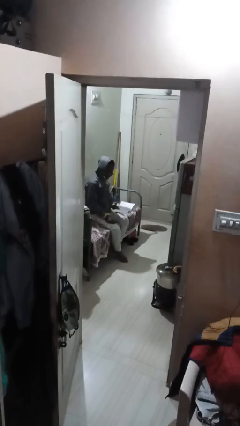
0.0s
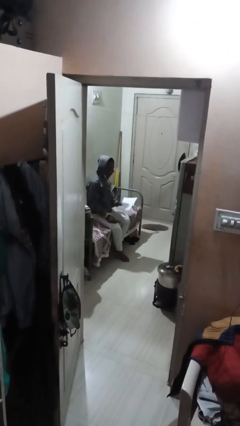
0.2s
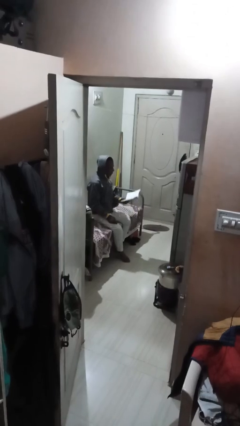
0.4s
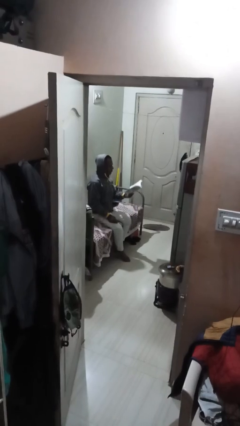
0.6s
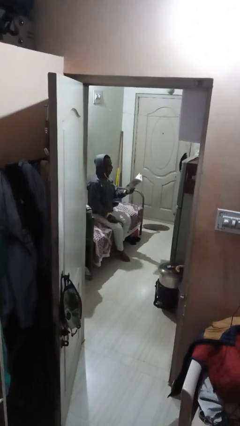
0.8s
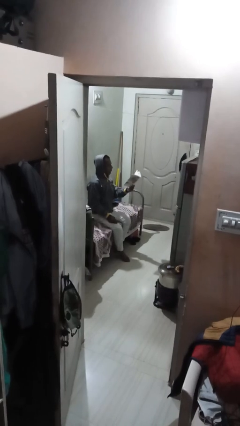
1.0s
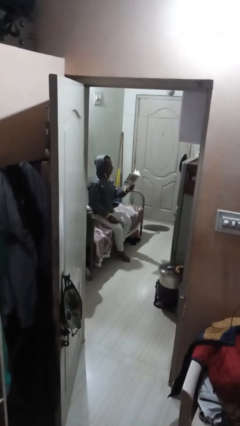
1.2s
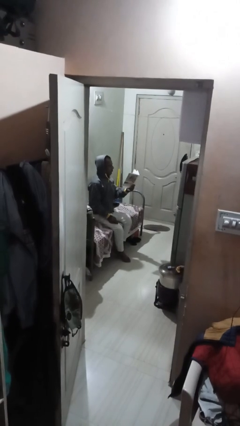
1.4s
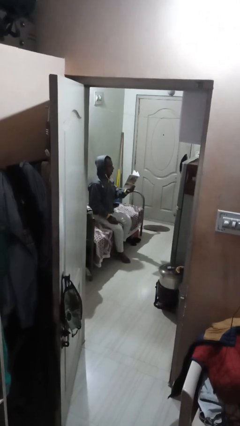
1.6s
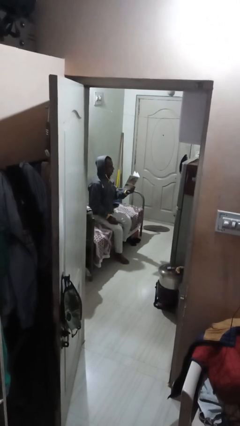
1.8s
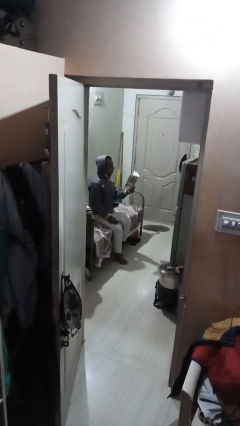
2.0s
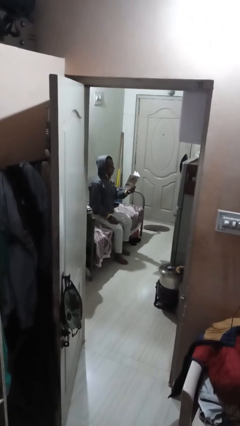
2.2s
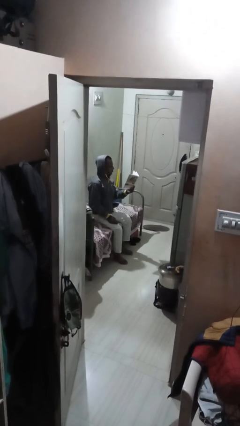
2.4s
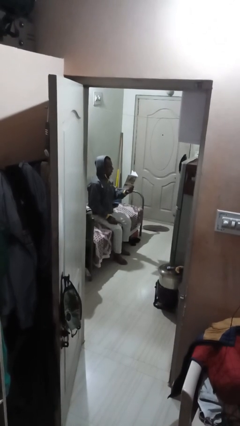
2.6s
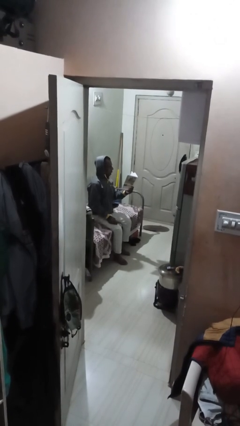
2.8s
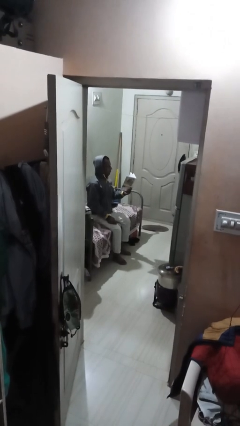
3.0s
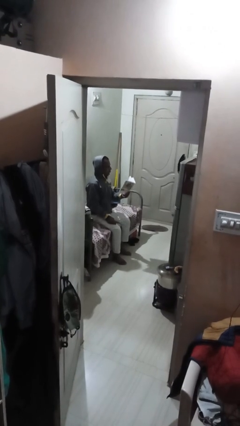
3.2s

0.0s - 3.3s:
person reads document

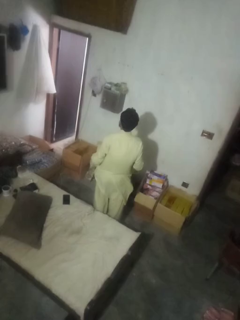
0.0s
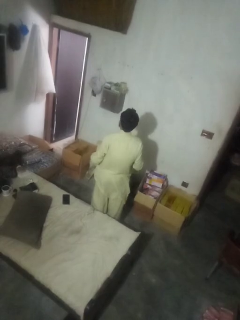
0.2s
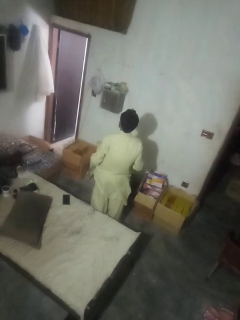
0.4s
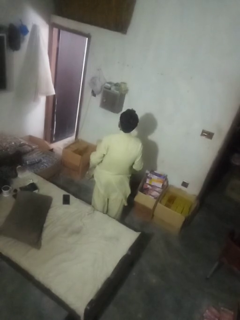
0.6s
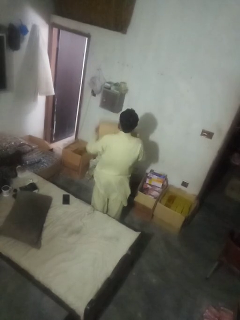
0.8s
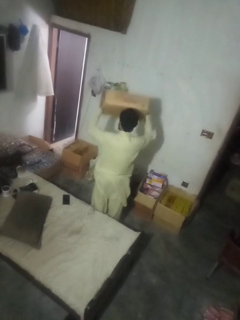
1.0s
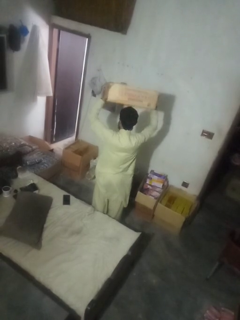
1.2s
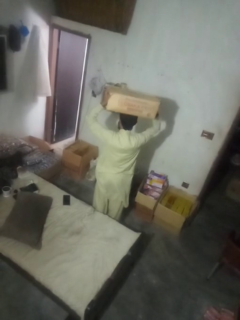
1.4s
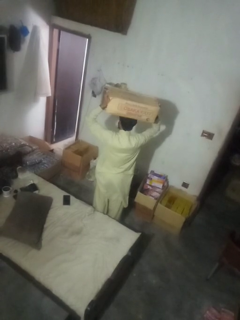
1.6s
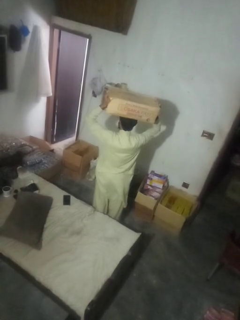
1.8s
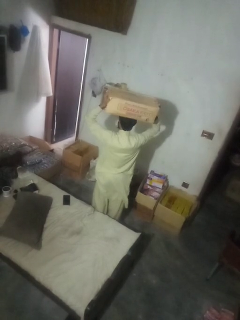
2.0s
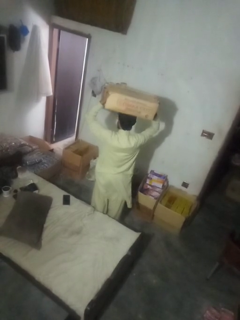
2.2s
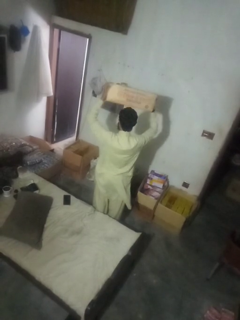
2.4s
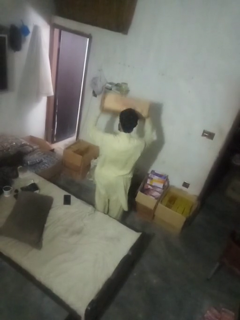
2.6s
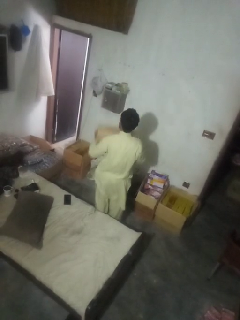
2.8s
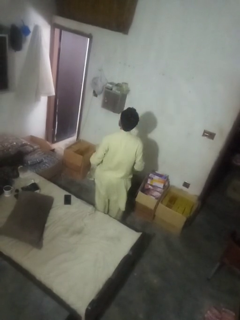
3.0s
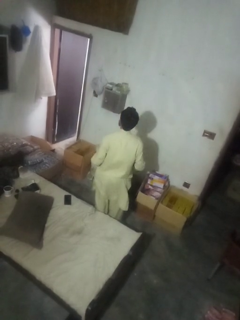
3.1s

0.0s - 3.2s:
person holds object above head

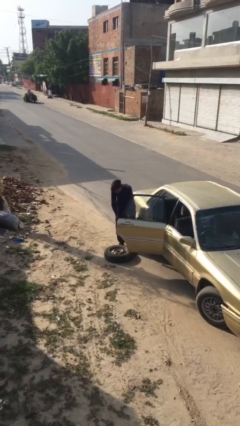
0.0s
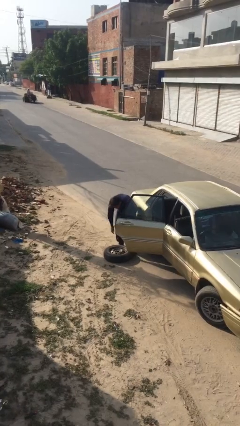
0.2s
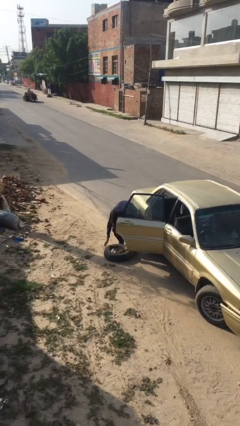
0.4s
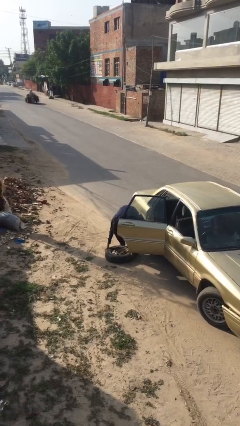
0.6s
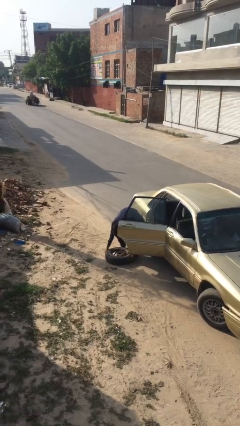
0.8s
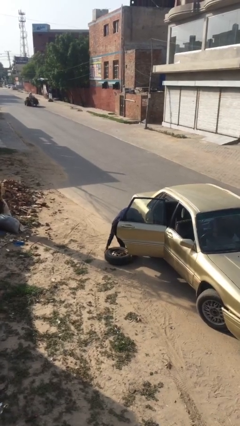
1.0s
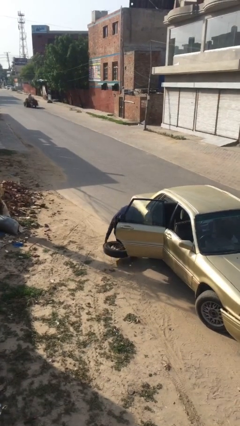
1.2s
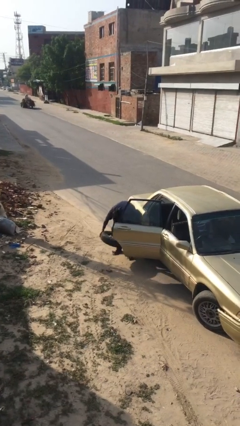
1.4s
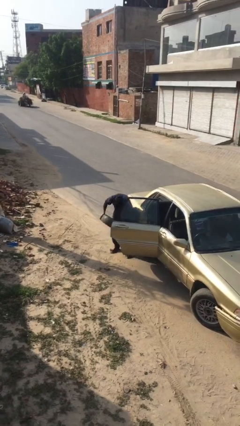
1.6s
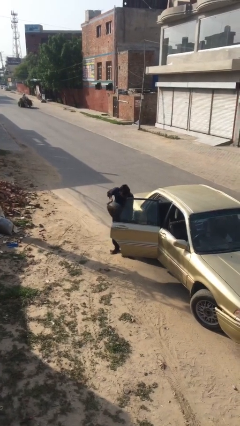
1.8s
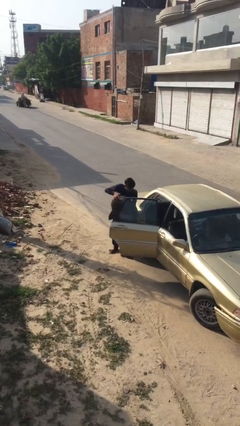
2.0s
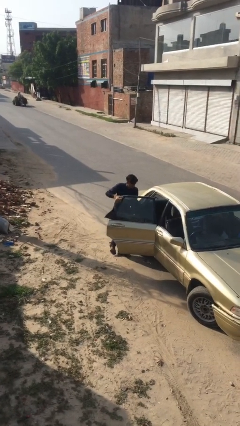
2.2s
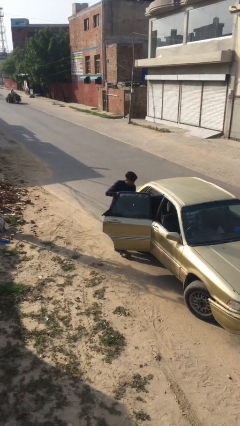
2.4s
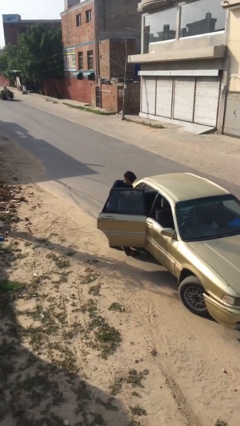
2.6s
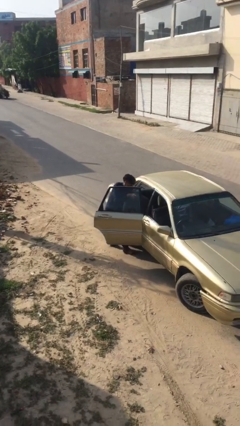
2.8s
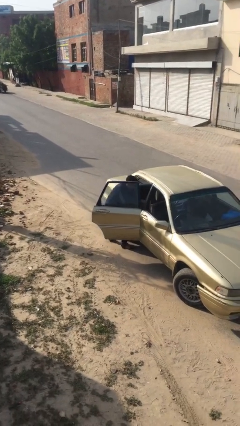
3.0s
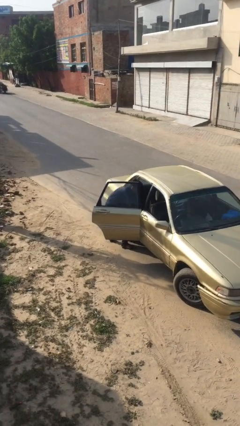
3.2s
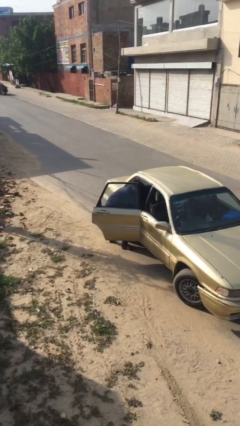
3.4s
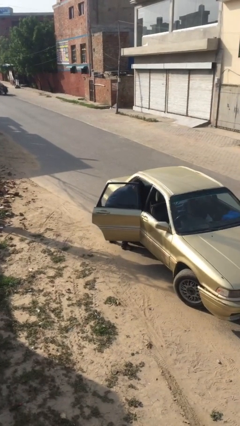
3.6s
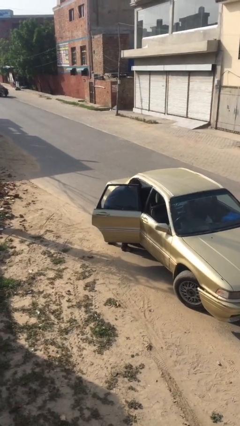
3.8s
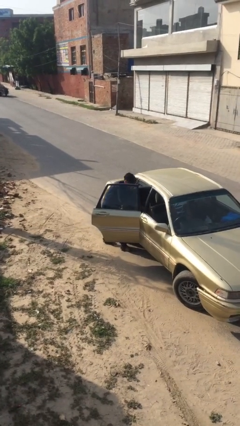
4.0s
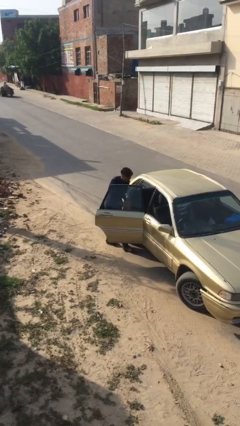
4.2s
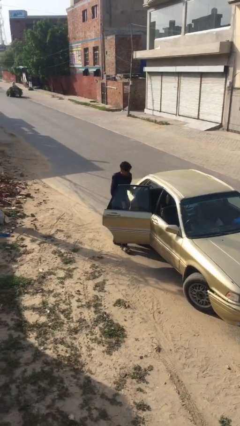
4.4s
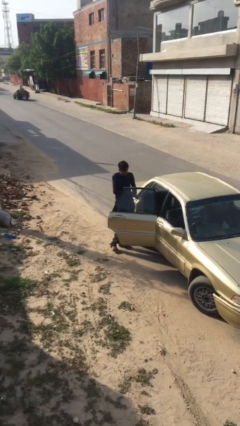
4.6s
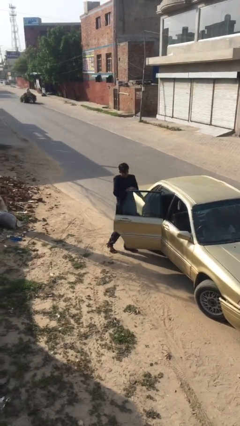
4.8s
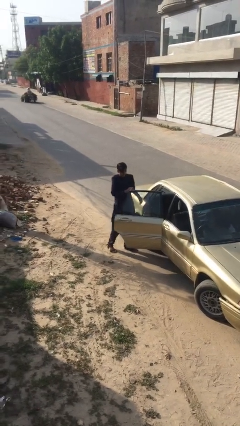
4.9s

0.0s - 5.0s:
person loads car

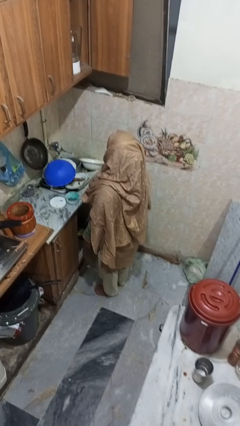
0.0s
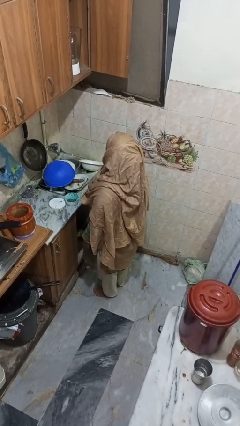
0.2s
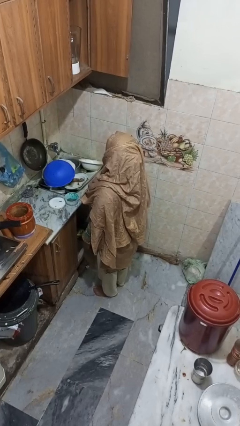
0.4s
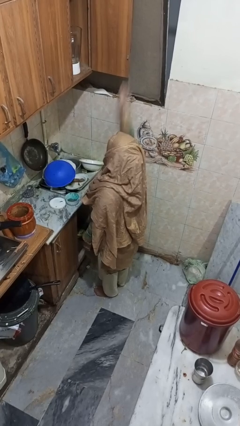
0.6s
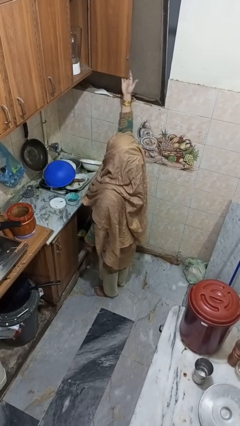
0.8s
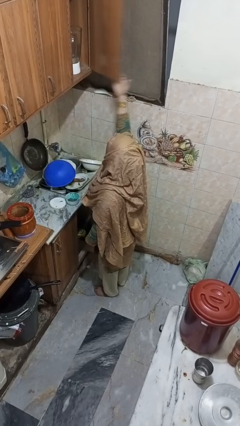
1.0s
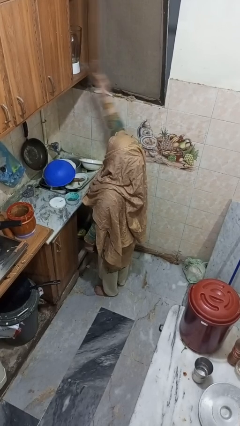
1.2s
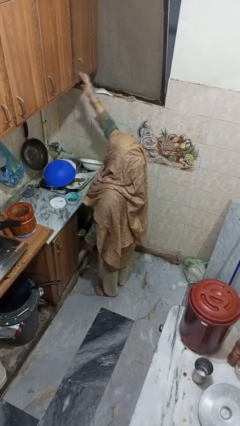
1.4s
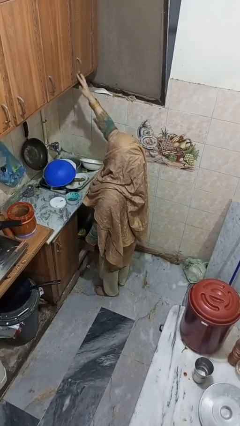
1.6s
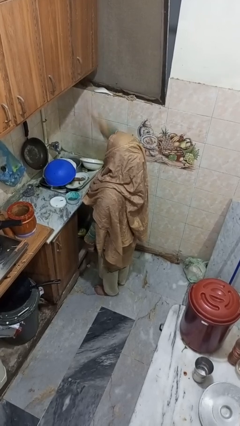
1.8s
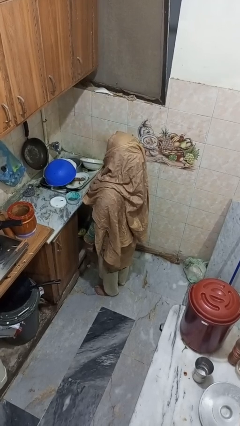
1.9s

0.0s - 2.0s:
person closes cabinet

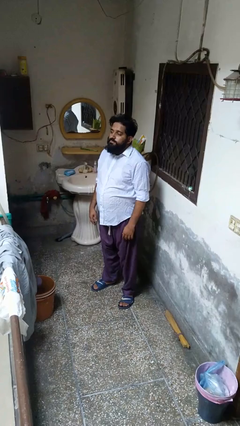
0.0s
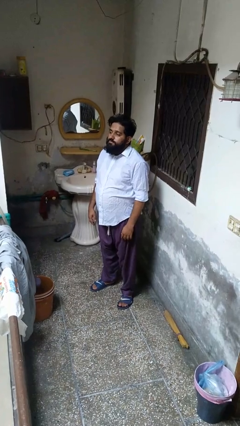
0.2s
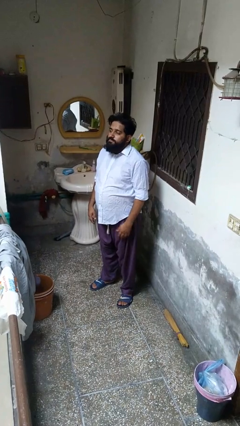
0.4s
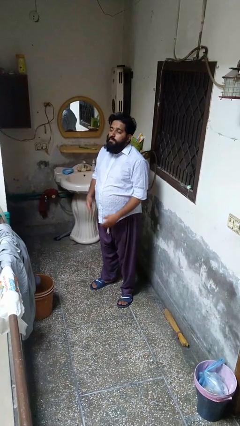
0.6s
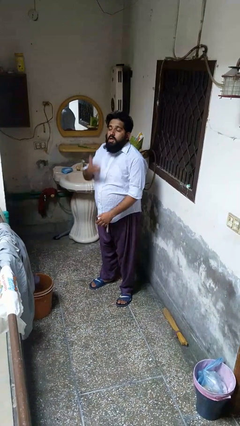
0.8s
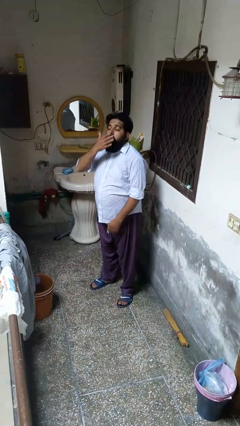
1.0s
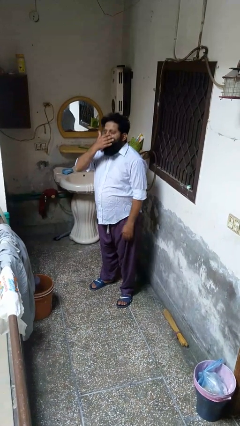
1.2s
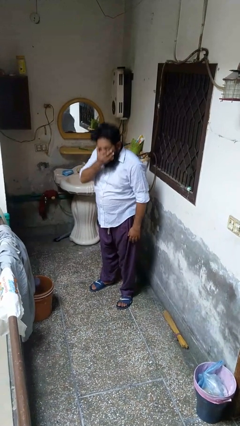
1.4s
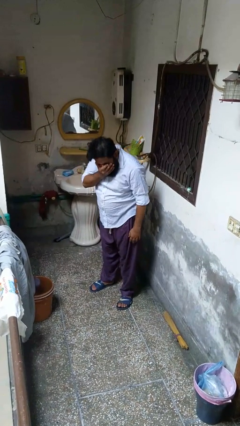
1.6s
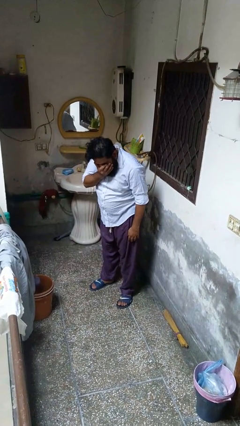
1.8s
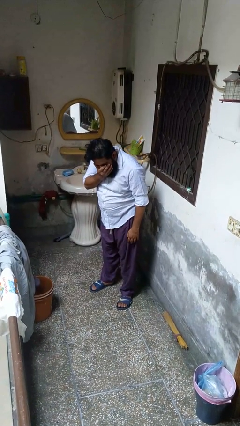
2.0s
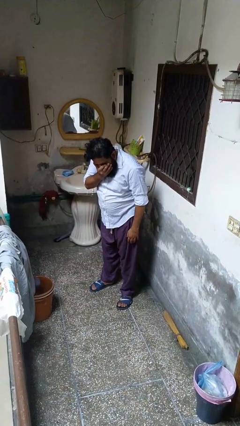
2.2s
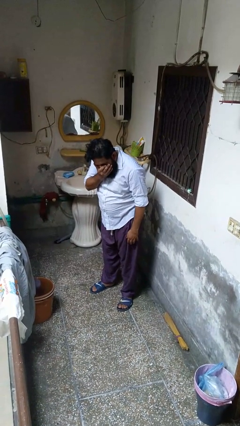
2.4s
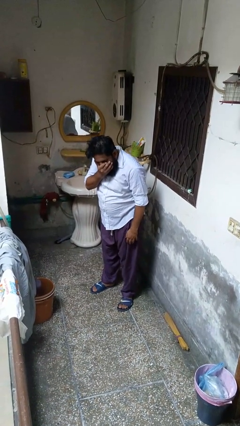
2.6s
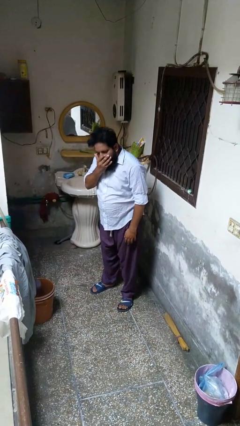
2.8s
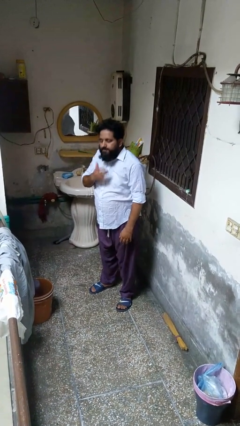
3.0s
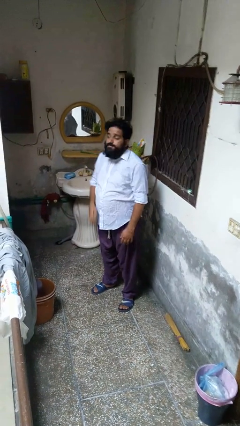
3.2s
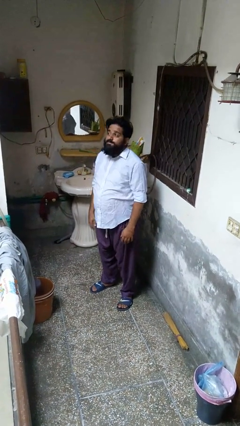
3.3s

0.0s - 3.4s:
person sneezes into hand

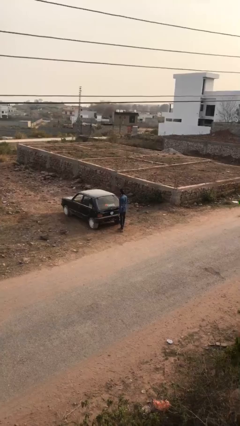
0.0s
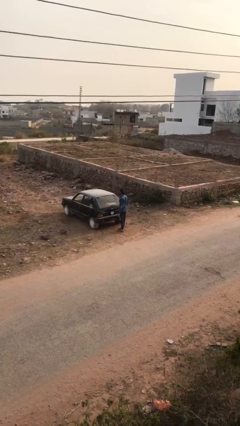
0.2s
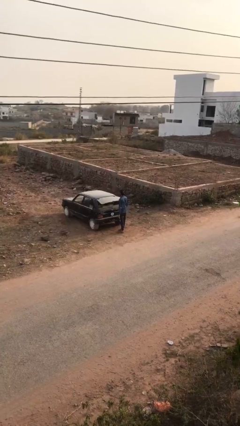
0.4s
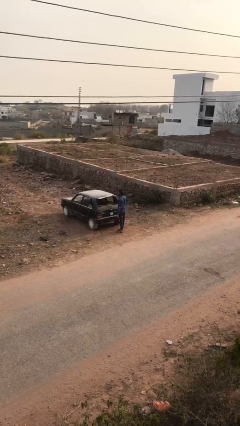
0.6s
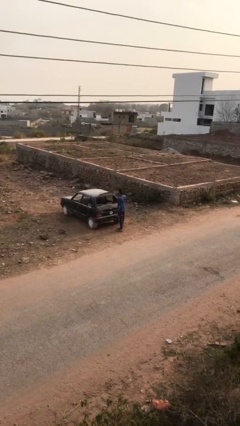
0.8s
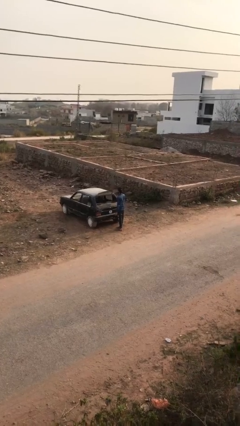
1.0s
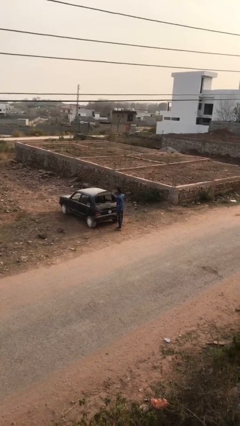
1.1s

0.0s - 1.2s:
person opens car trunk

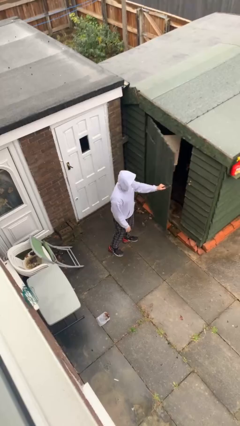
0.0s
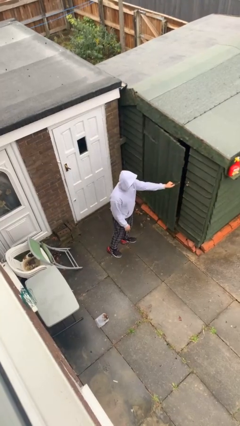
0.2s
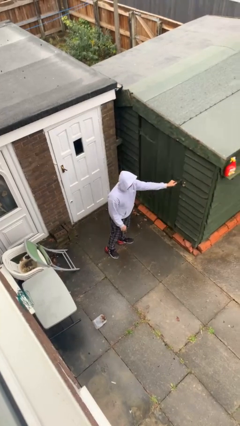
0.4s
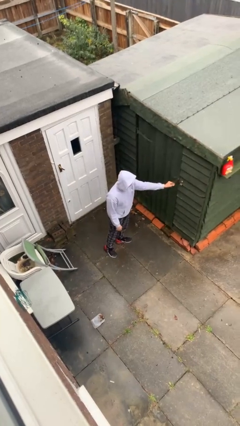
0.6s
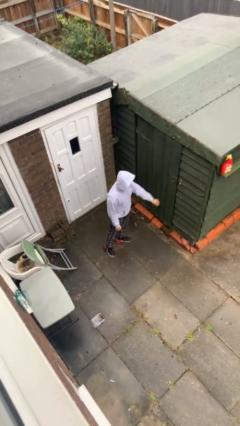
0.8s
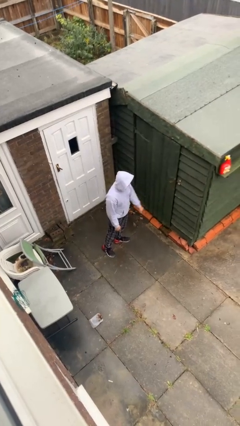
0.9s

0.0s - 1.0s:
person closes facility door
